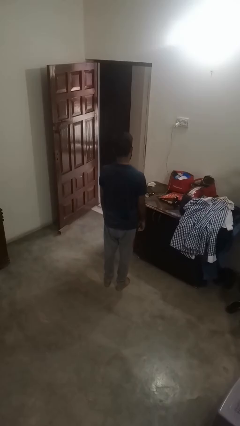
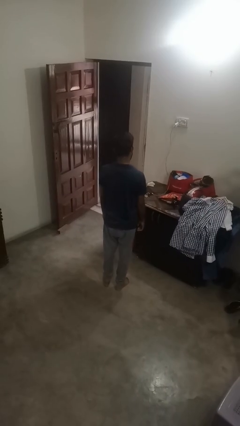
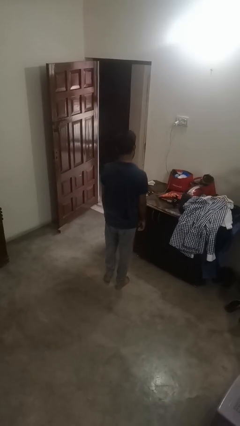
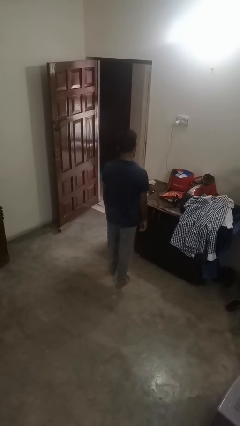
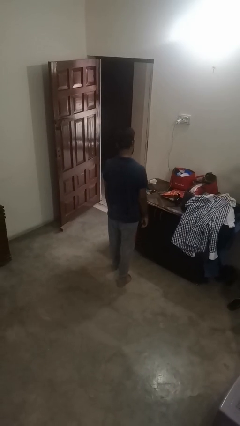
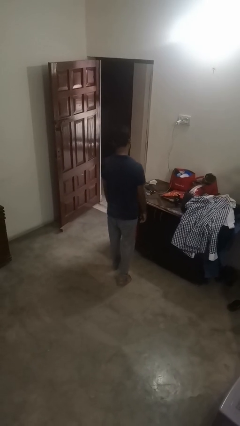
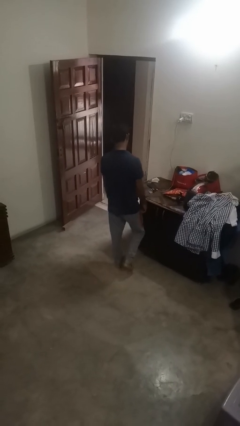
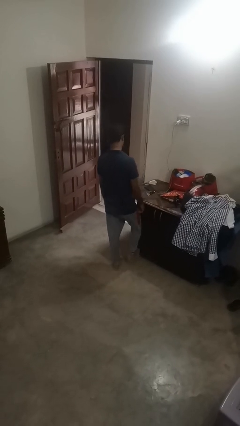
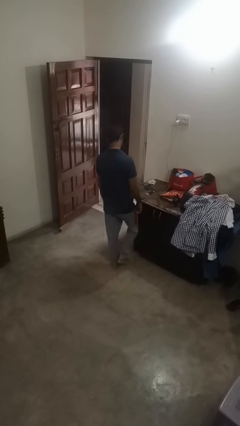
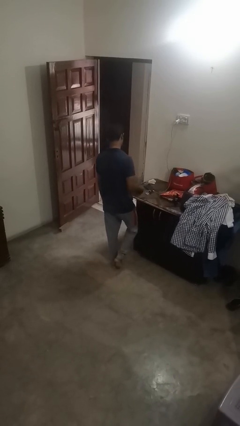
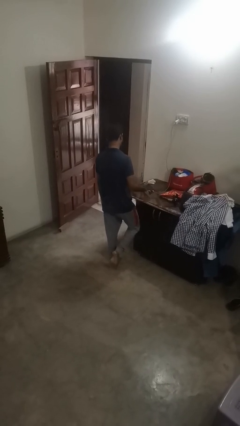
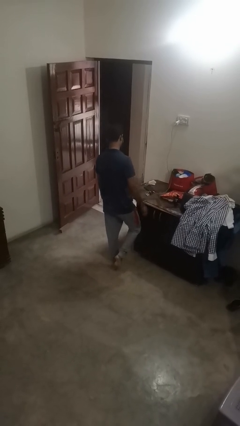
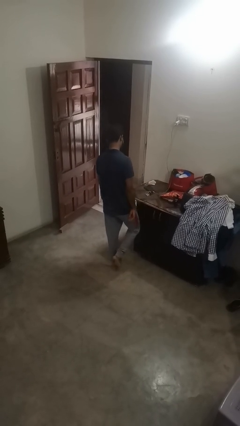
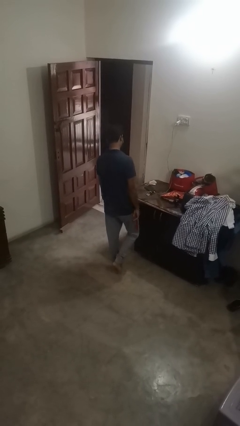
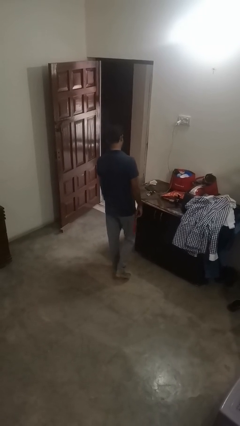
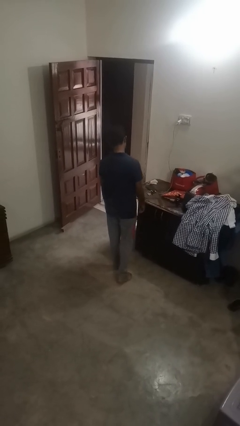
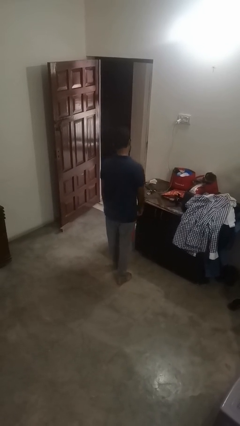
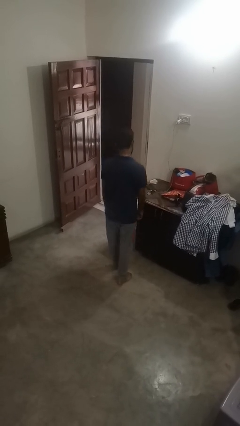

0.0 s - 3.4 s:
person stubs toe

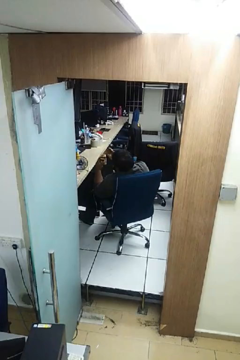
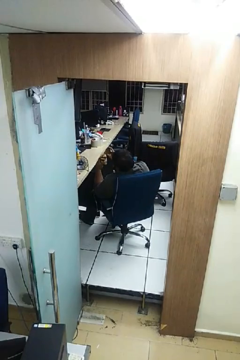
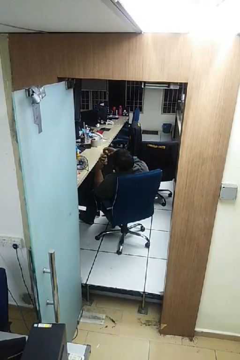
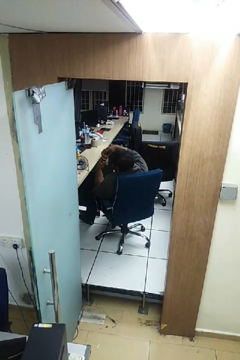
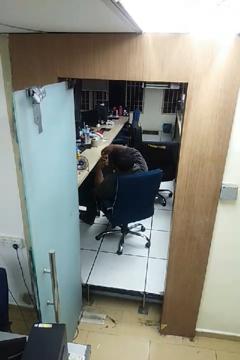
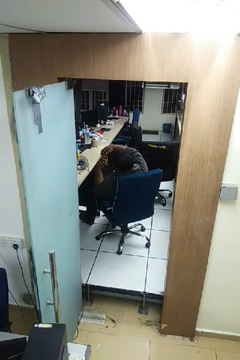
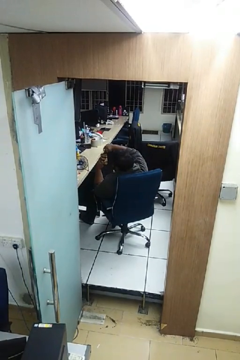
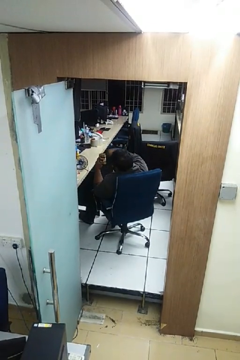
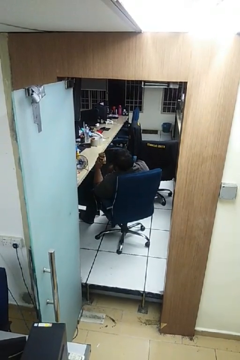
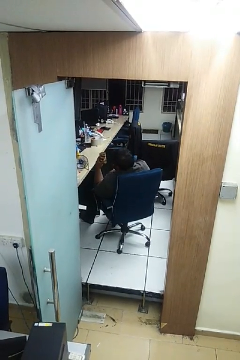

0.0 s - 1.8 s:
person closes jar

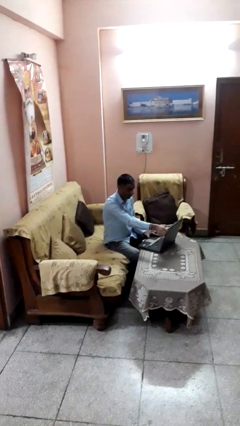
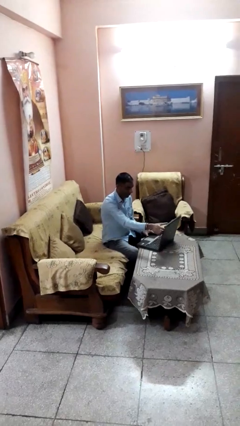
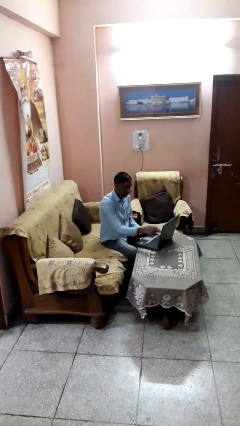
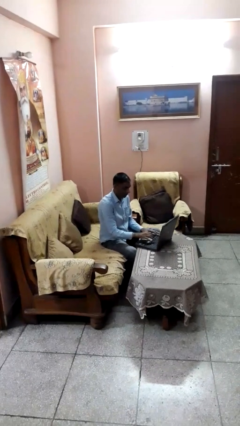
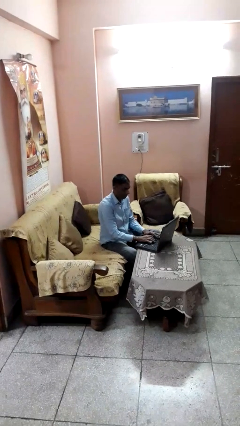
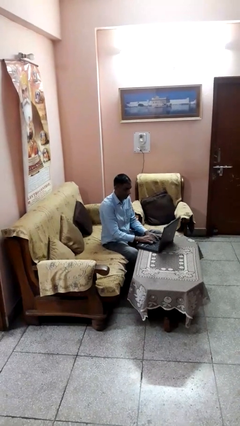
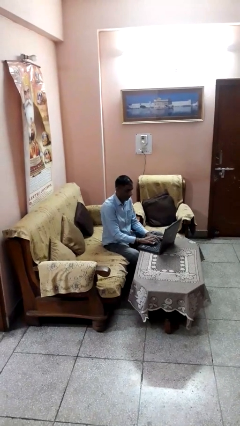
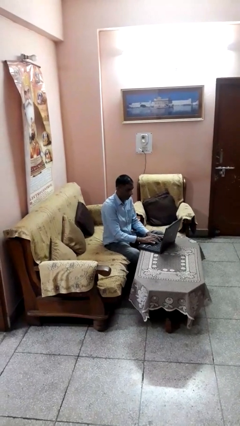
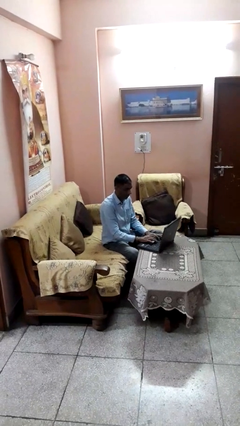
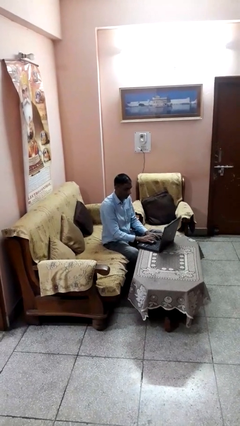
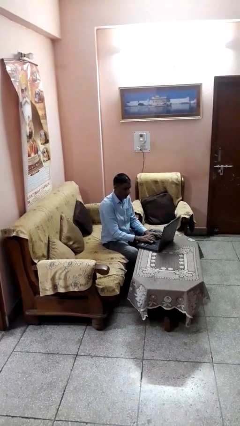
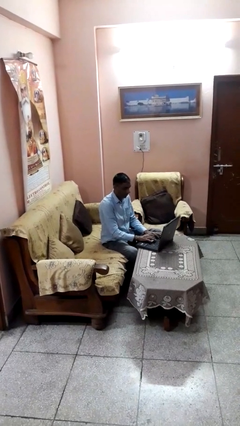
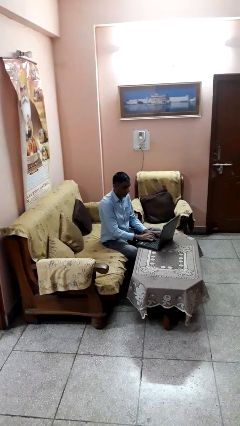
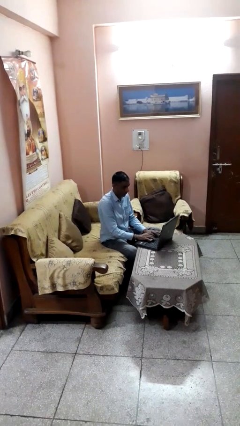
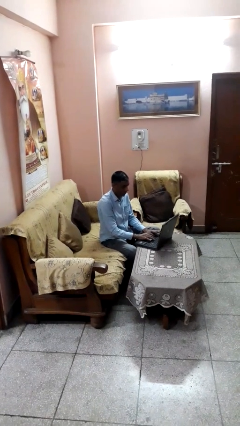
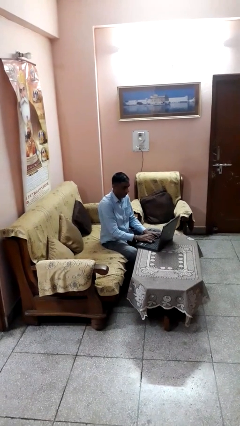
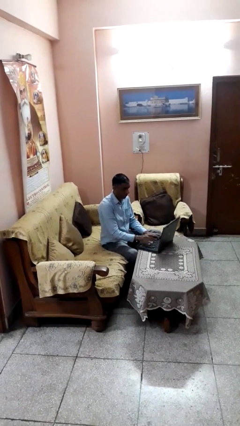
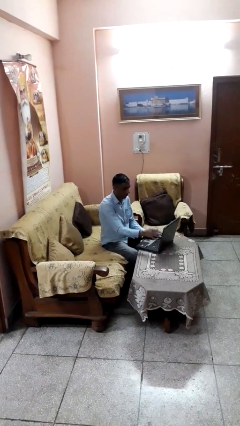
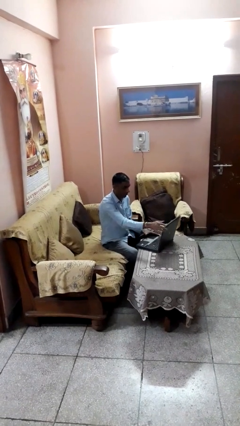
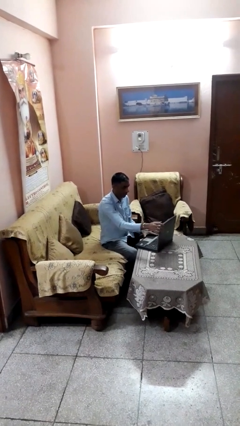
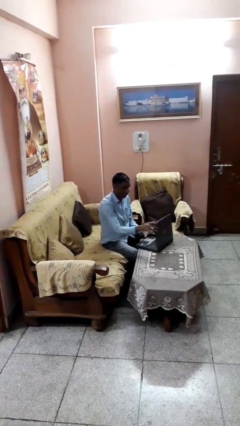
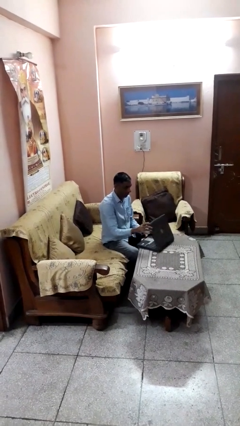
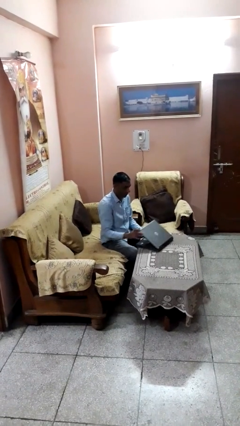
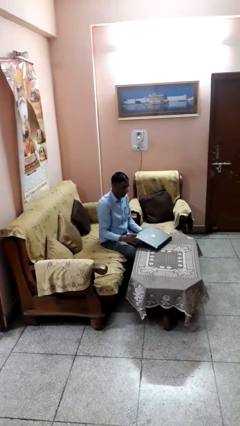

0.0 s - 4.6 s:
person interacts with laptop

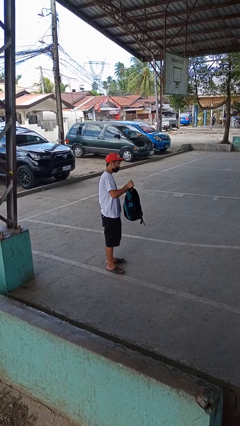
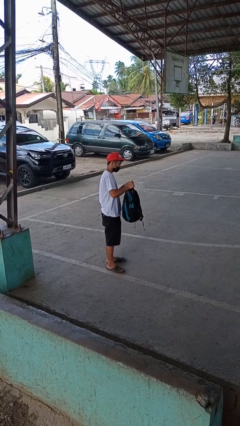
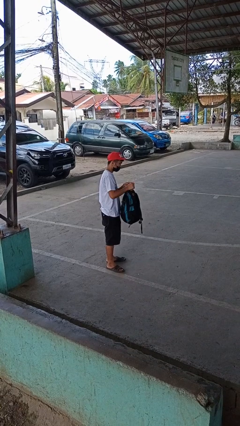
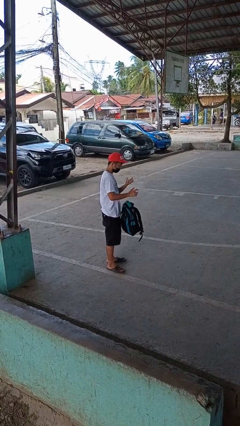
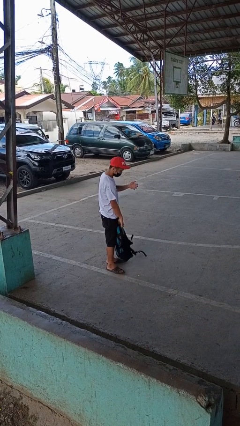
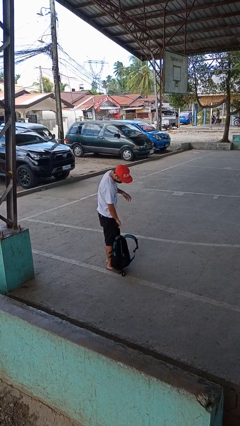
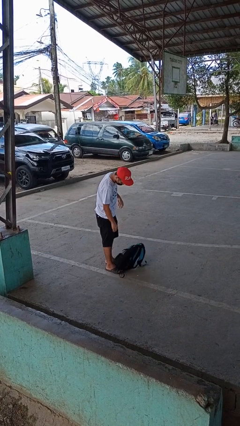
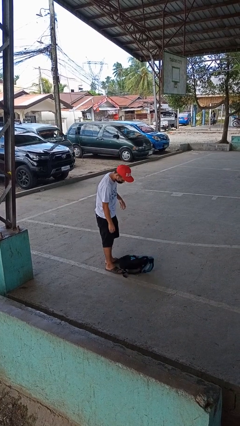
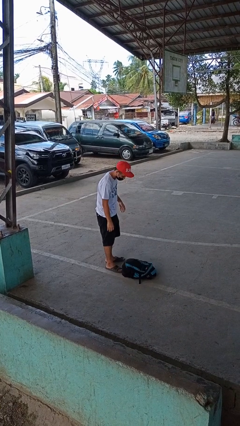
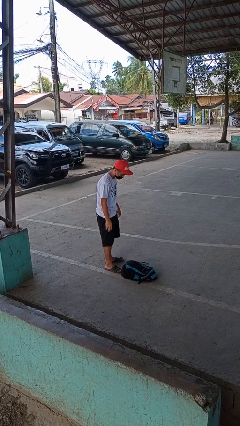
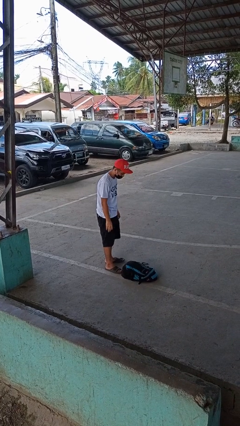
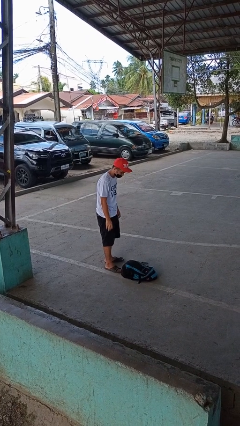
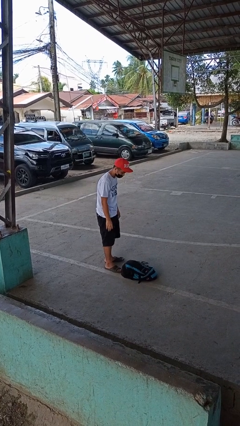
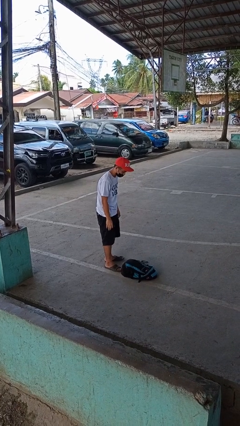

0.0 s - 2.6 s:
person drops object

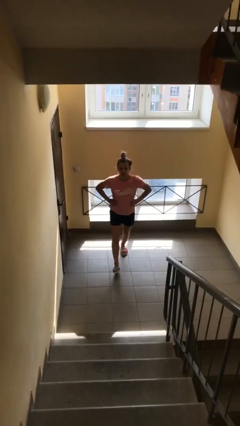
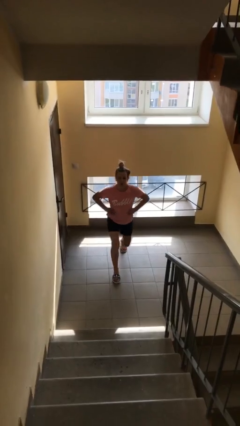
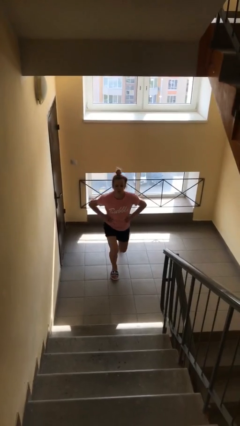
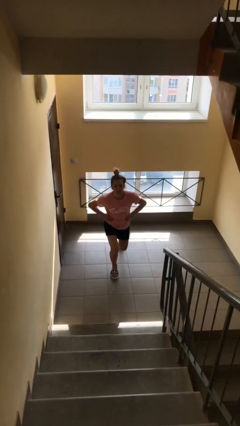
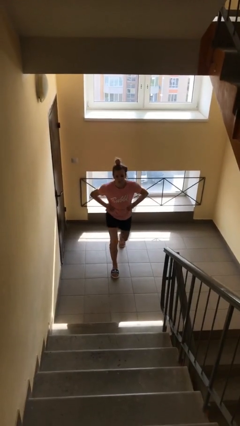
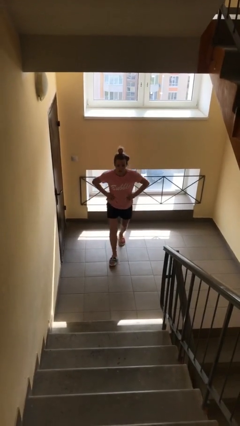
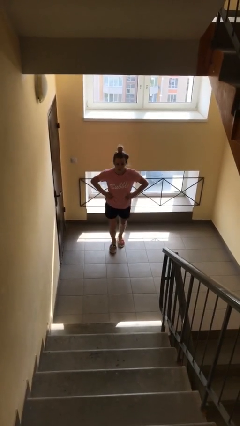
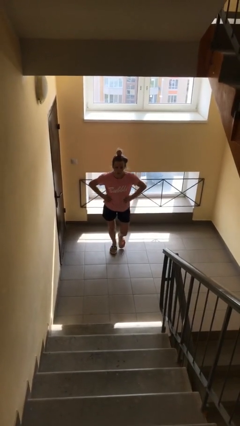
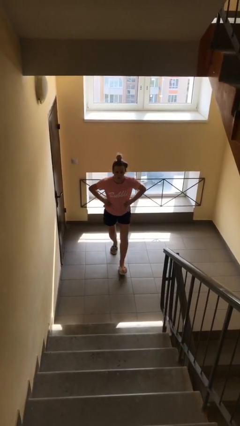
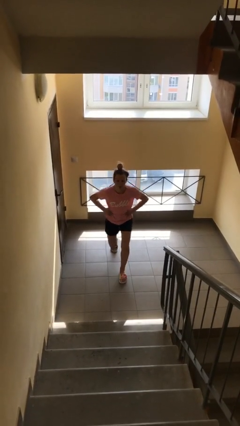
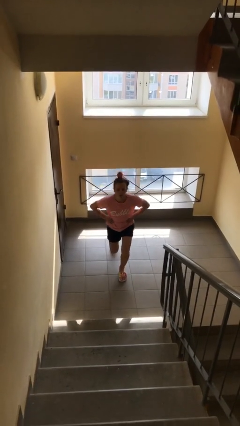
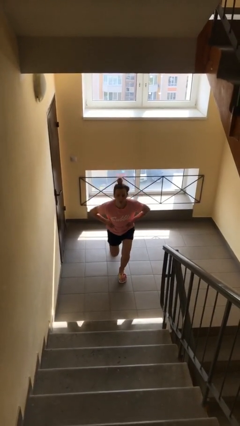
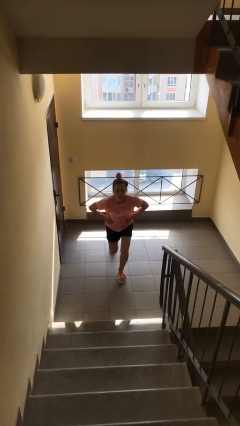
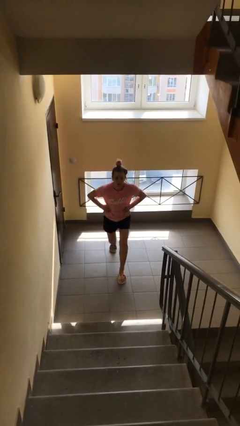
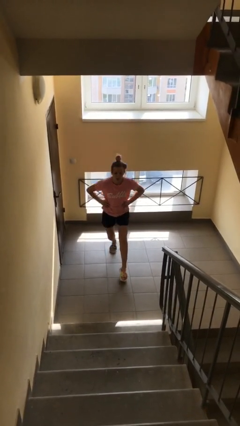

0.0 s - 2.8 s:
person exercises with lunges

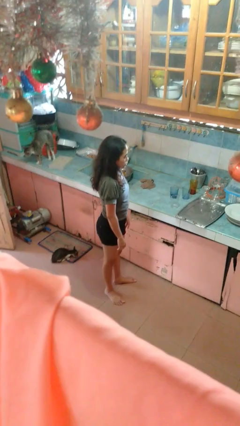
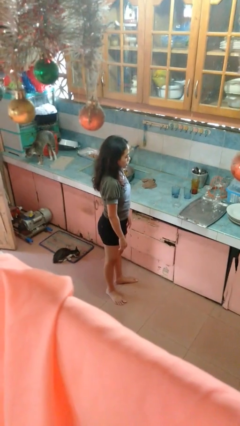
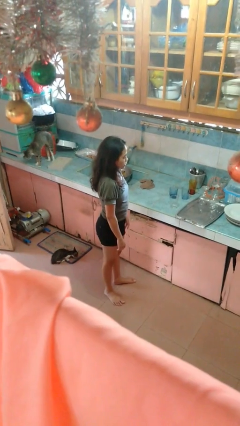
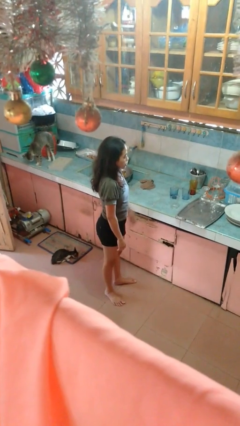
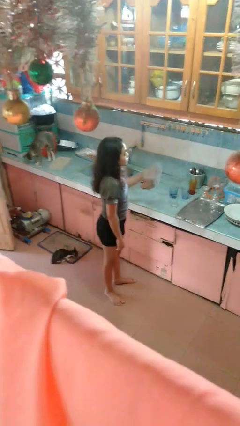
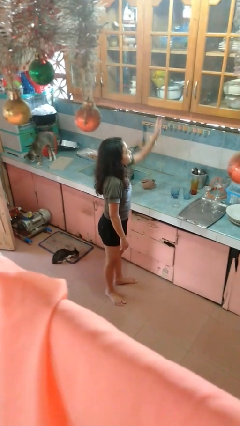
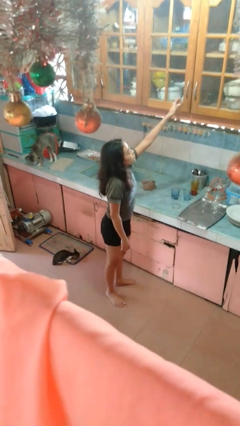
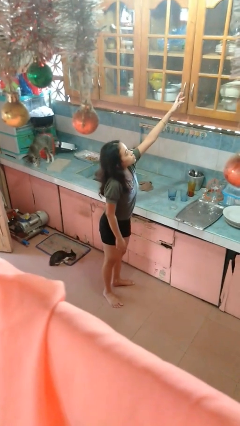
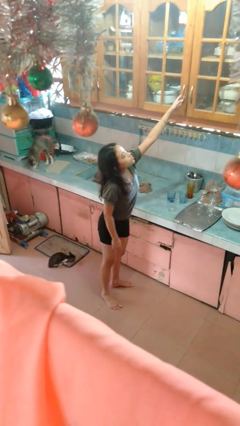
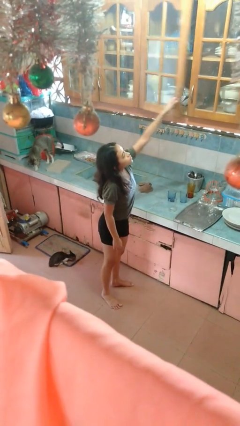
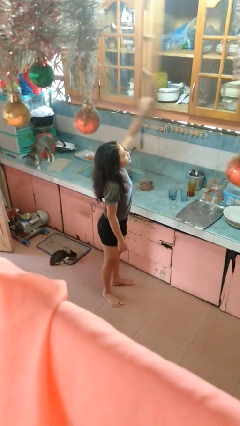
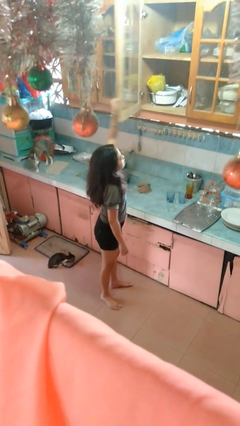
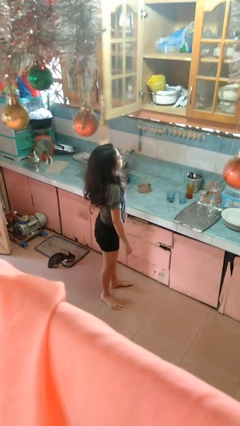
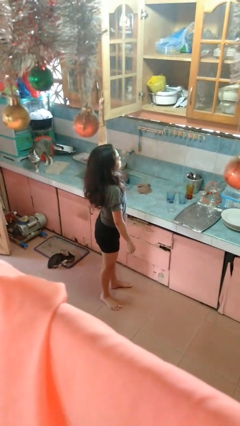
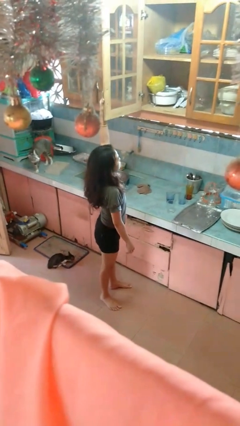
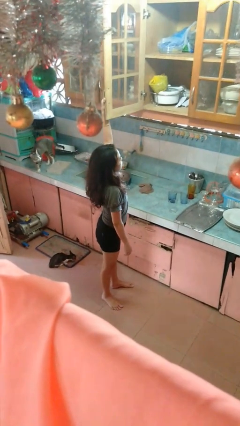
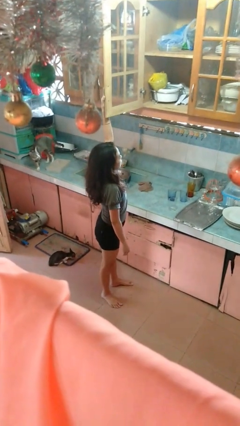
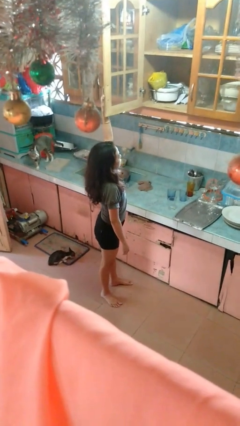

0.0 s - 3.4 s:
person opens cabinet
